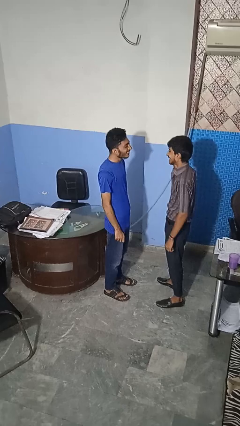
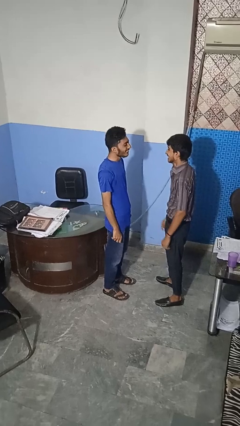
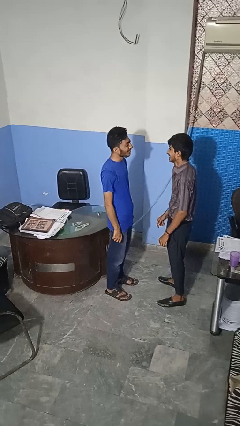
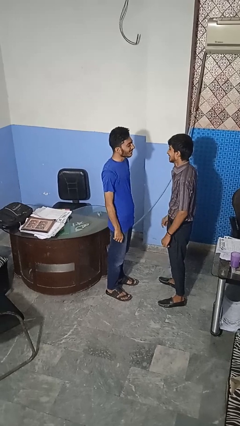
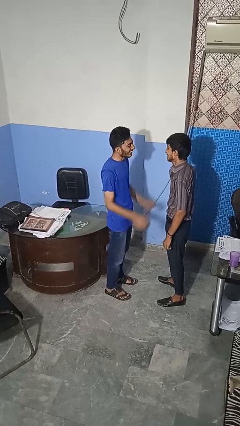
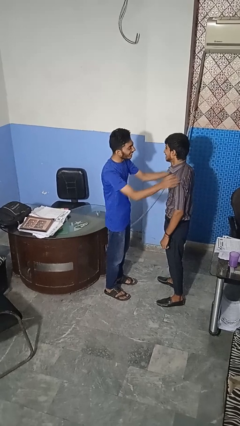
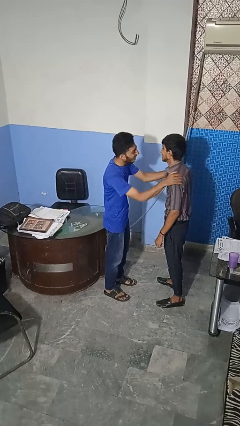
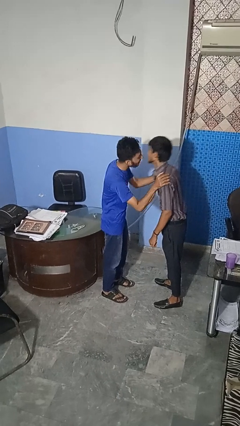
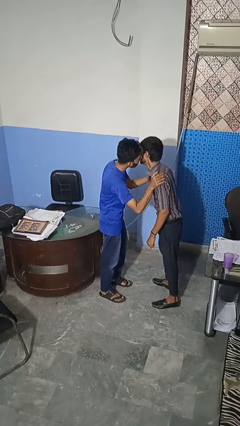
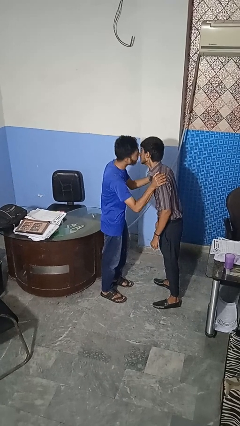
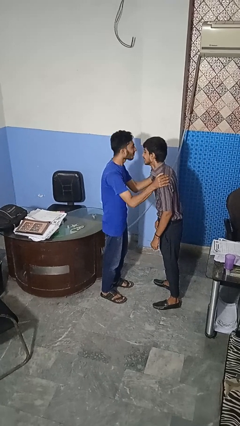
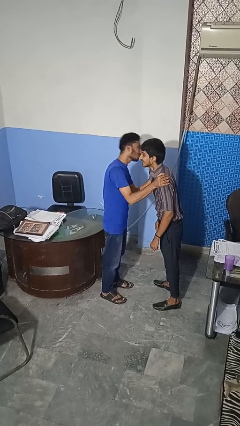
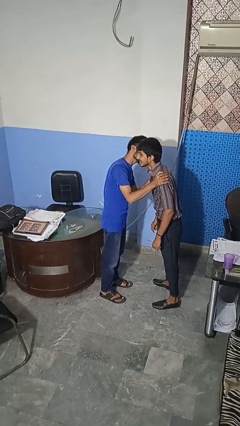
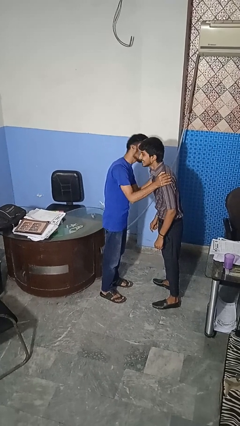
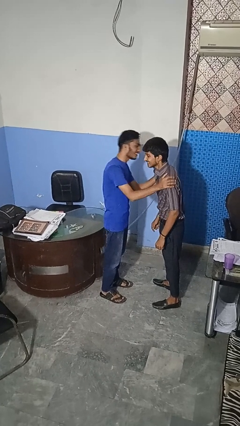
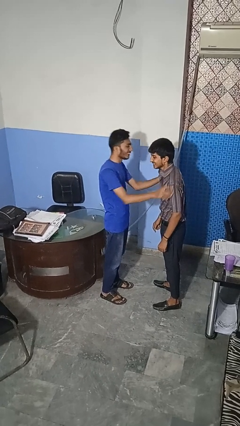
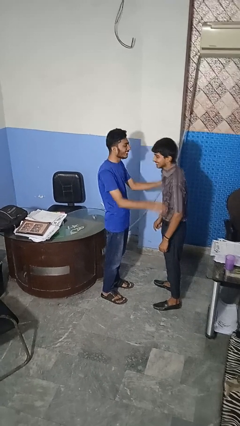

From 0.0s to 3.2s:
person kisses cheek of person

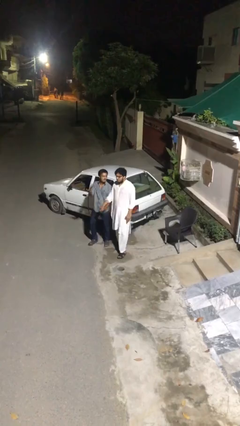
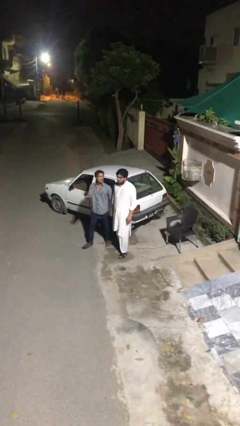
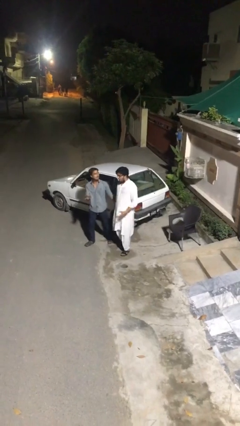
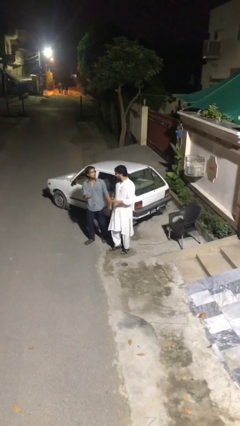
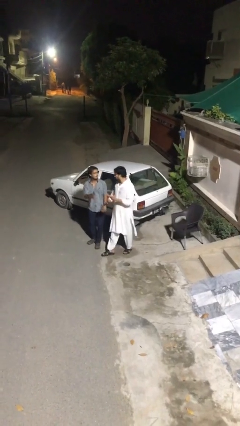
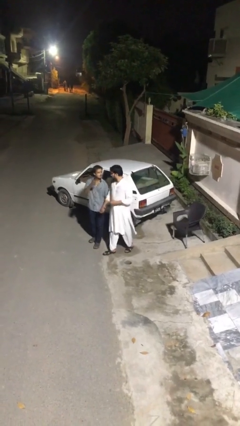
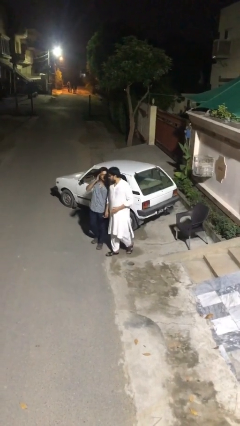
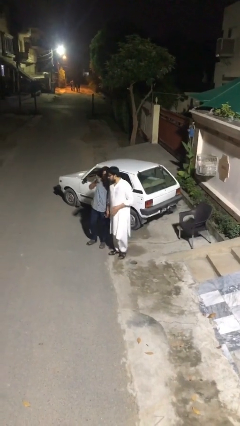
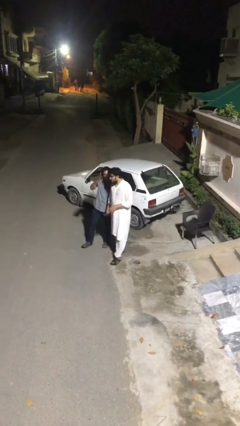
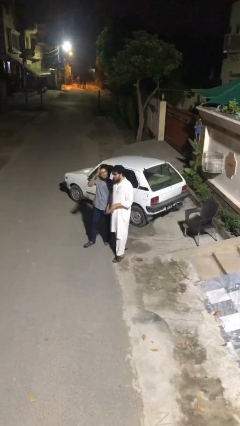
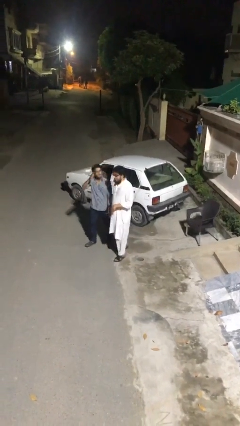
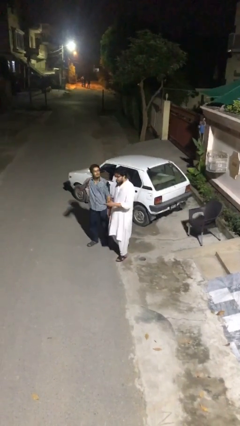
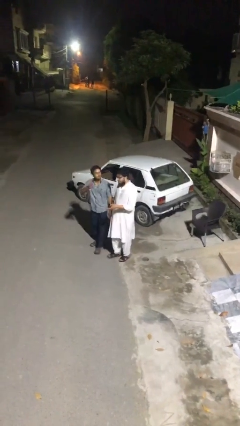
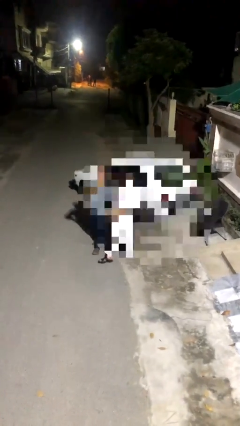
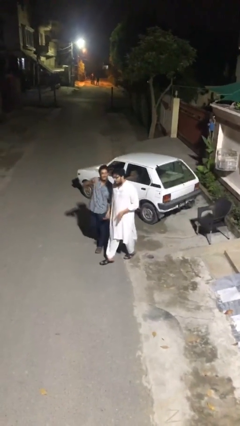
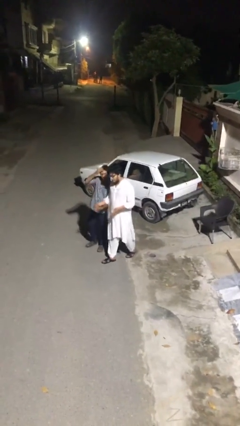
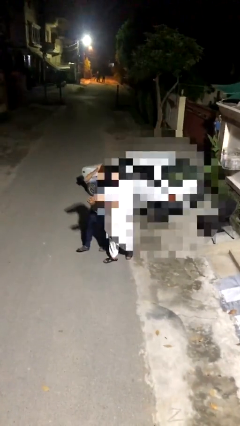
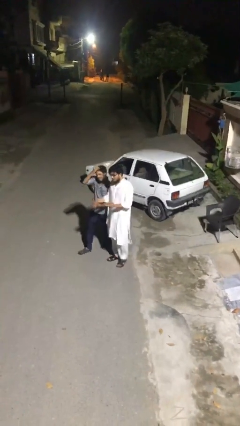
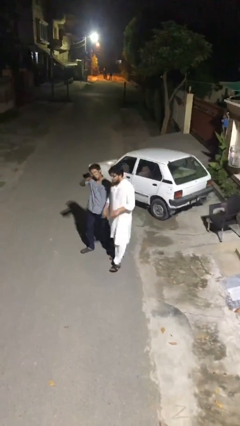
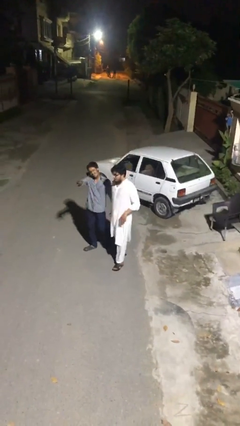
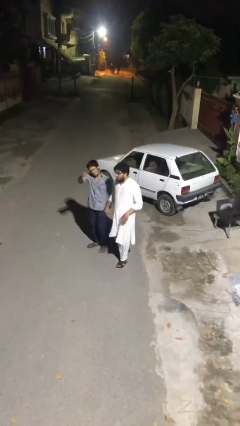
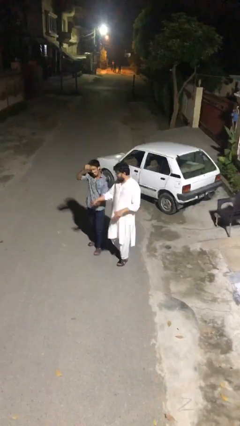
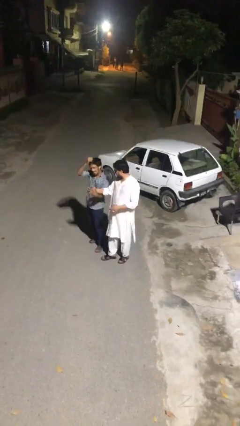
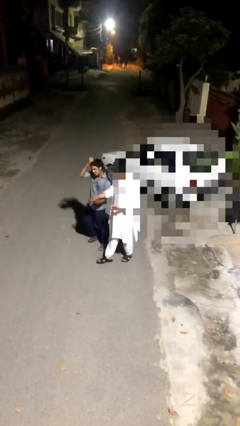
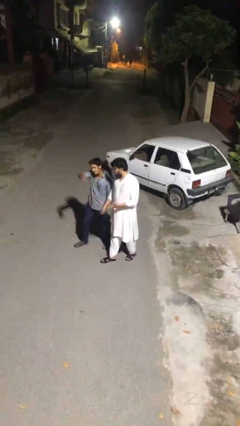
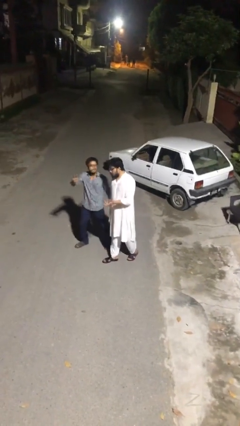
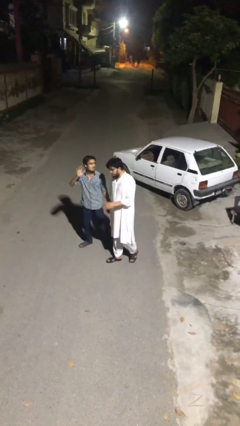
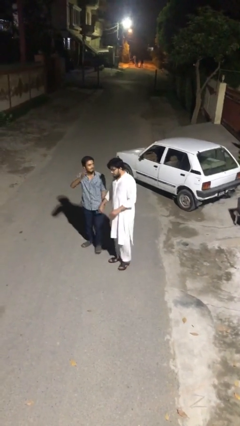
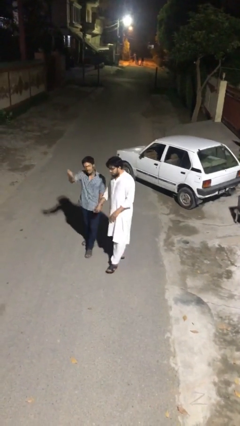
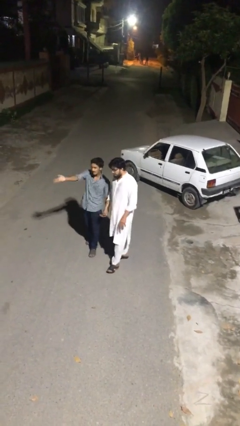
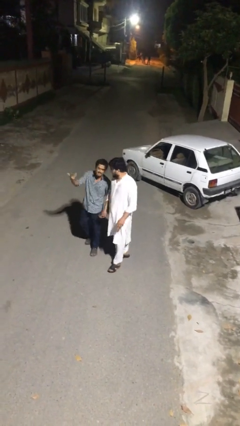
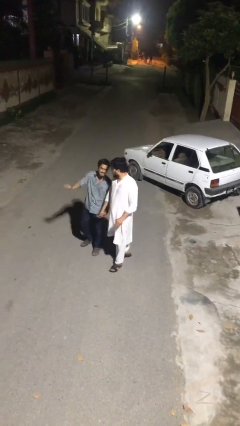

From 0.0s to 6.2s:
person holds hand

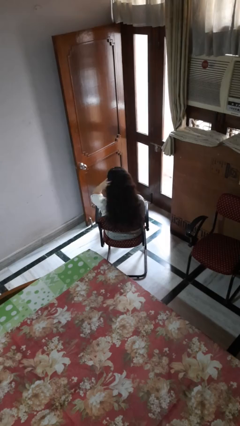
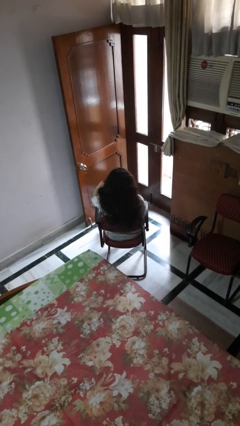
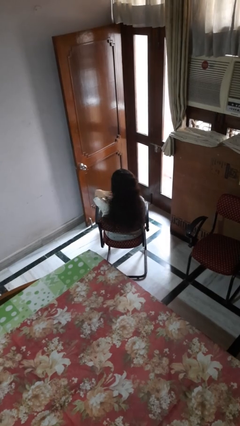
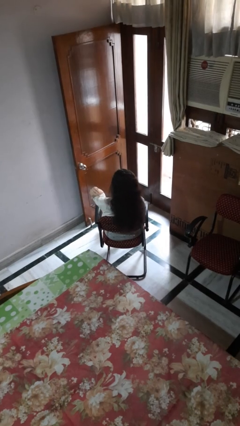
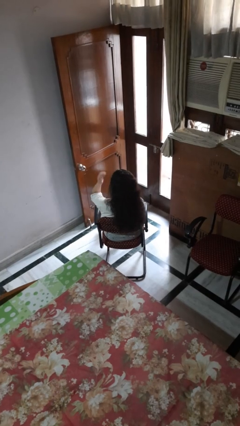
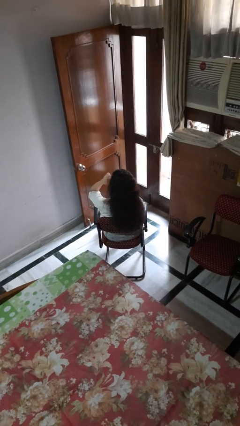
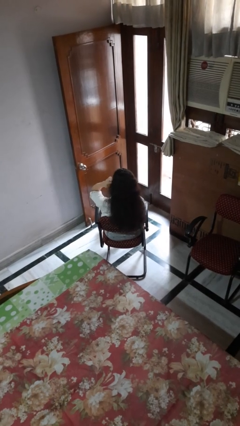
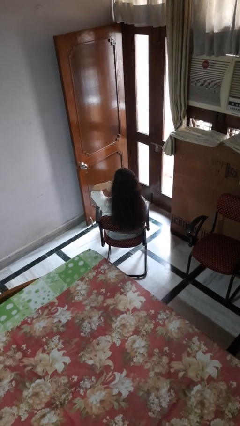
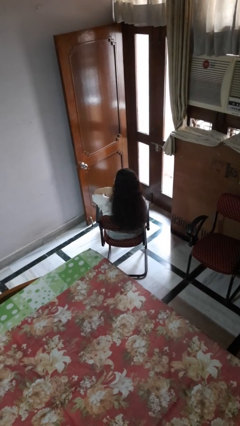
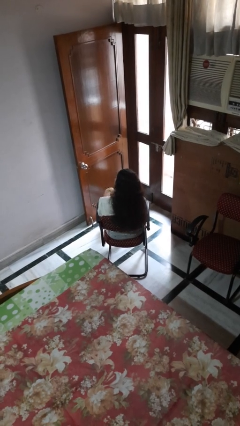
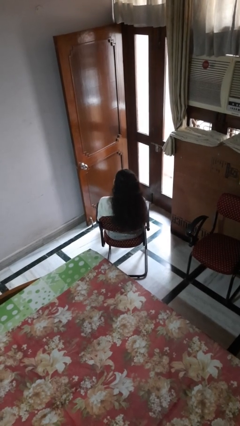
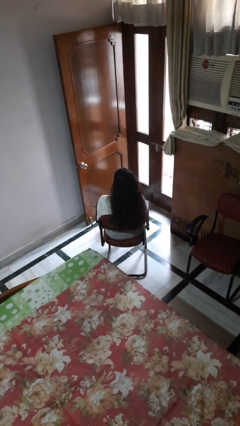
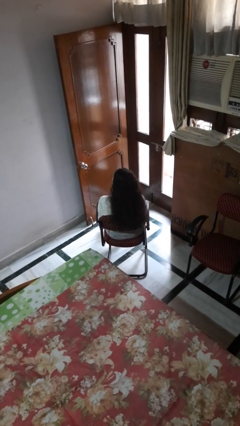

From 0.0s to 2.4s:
person strokes hair

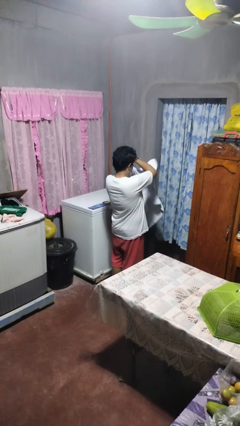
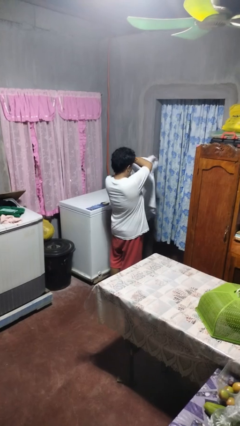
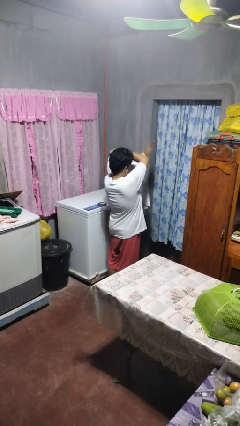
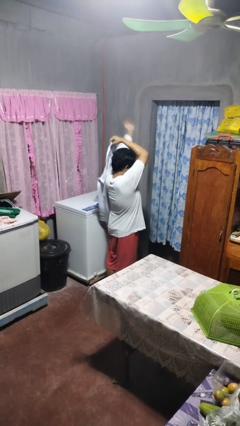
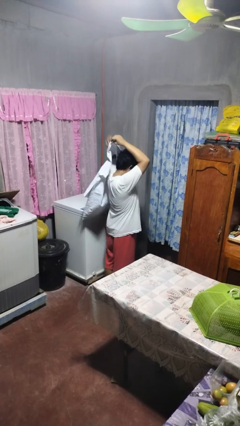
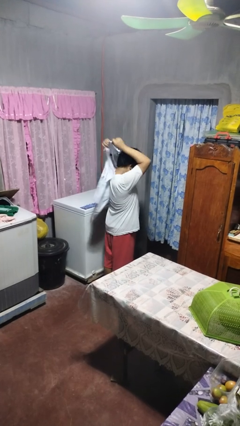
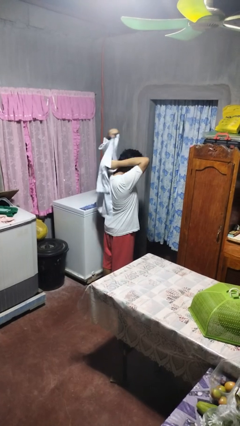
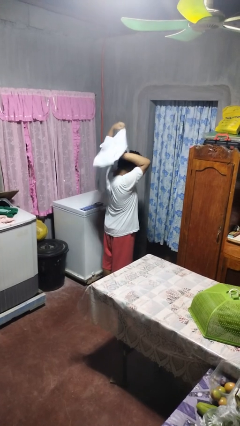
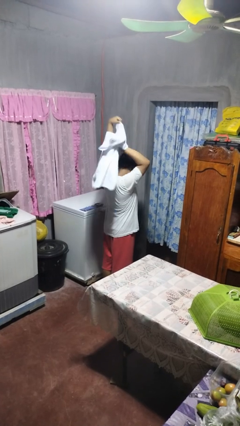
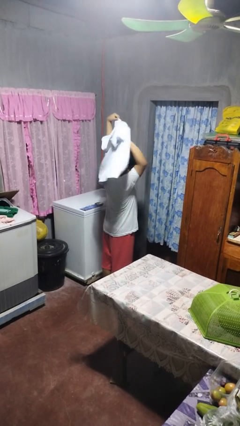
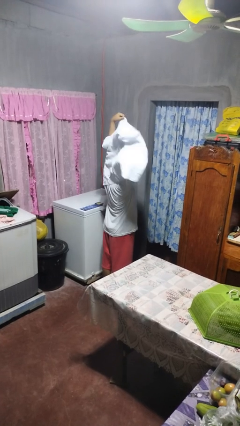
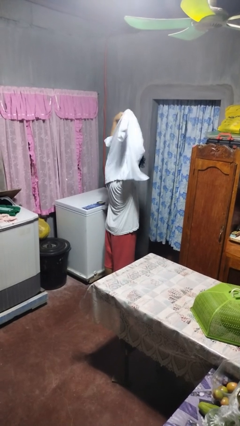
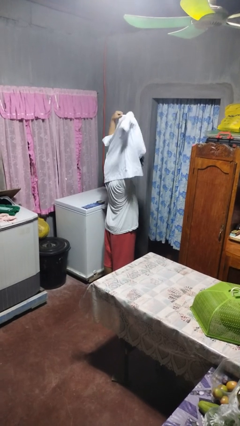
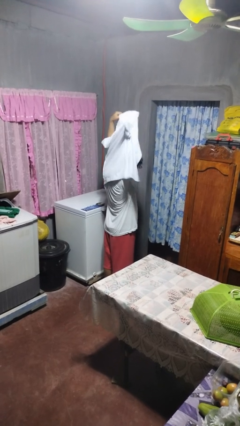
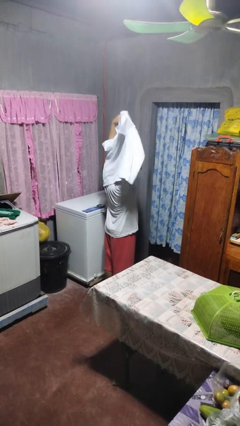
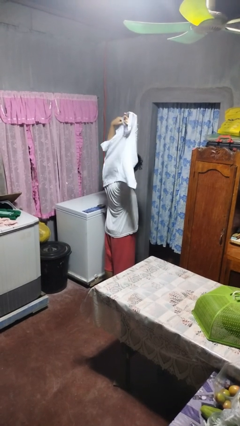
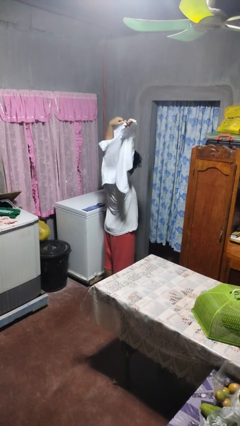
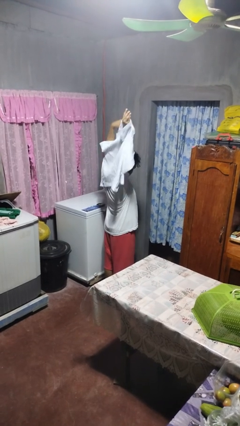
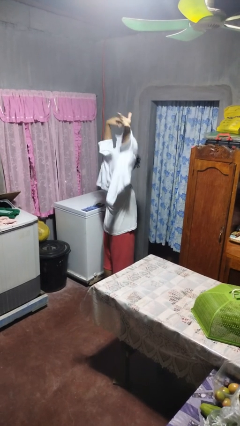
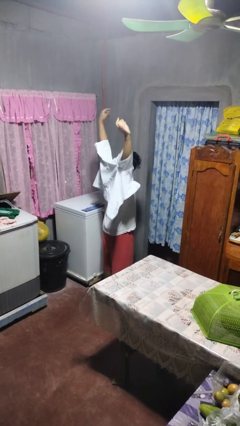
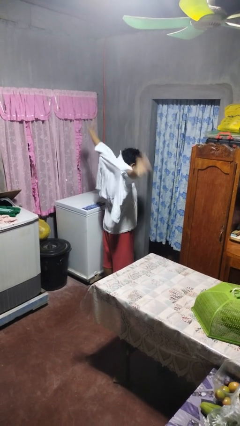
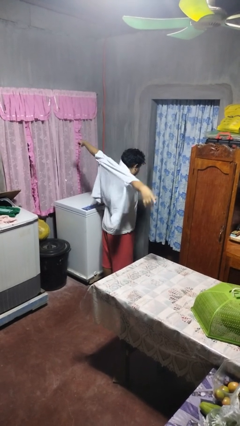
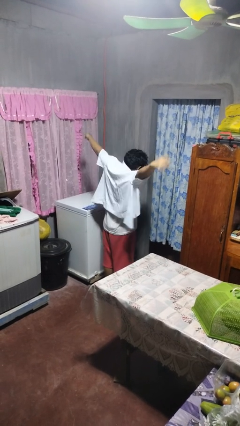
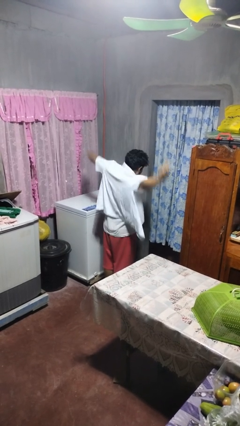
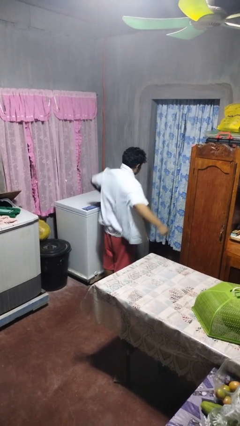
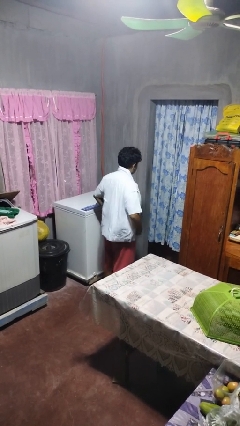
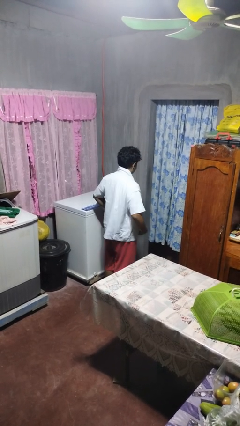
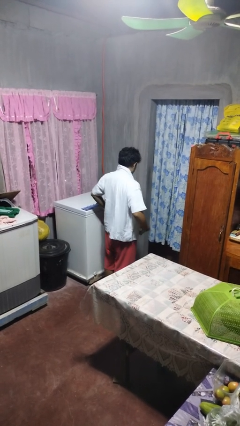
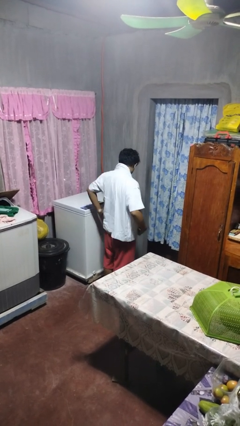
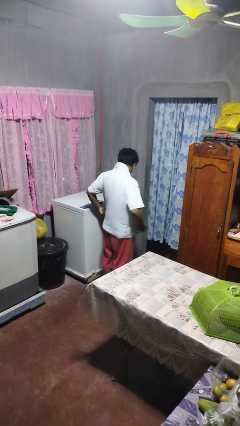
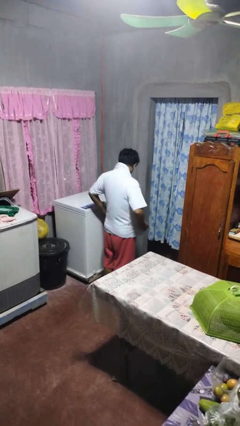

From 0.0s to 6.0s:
person puts on shirt
